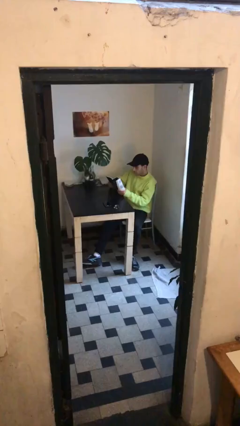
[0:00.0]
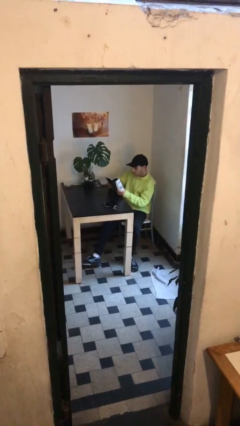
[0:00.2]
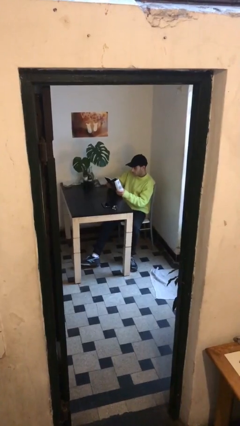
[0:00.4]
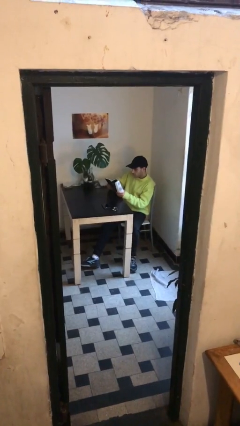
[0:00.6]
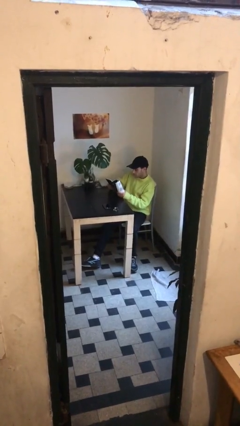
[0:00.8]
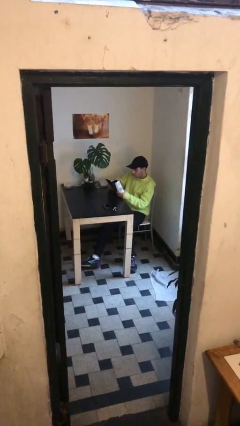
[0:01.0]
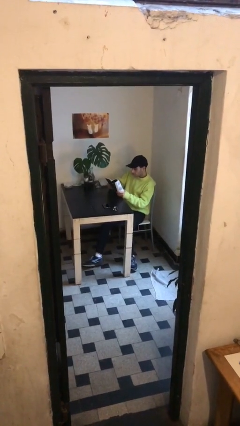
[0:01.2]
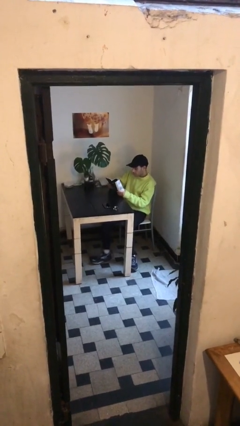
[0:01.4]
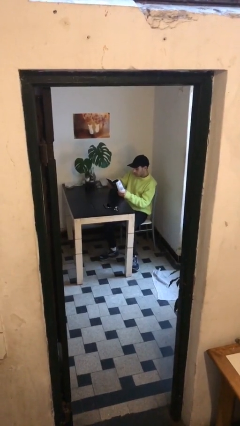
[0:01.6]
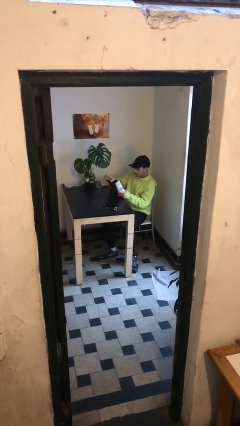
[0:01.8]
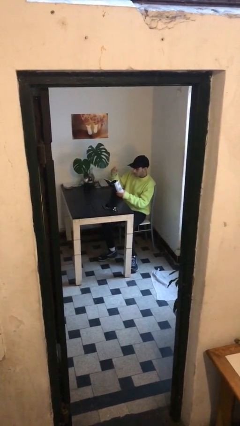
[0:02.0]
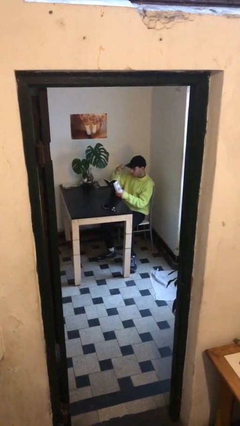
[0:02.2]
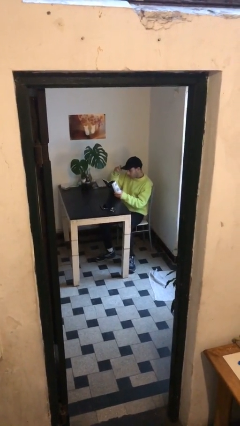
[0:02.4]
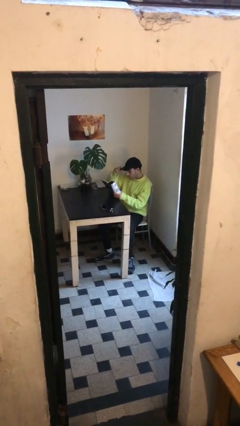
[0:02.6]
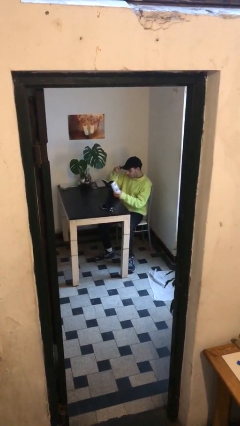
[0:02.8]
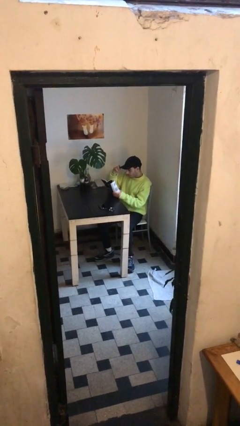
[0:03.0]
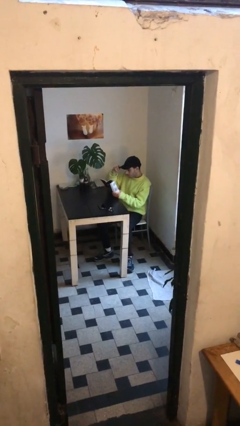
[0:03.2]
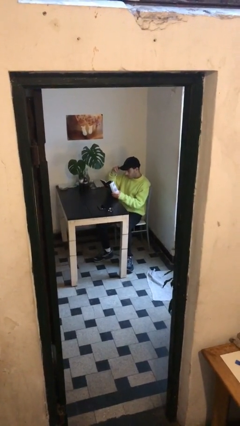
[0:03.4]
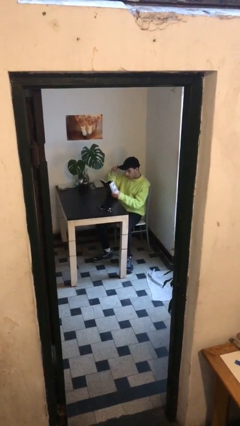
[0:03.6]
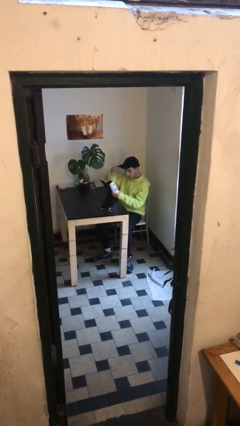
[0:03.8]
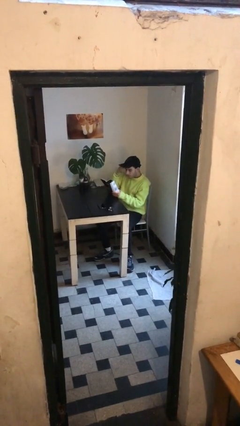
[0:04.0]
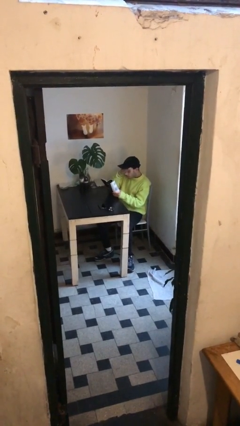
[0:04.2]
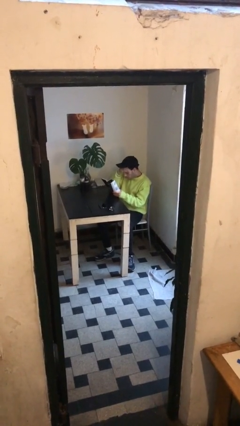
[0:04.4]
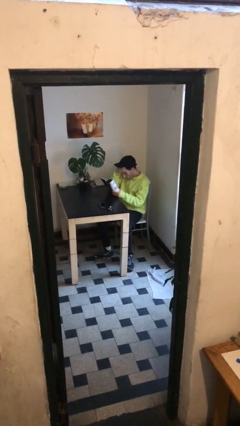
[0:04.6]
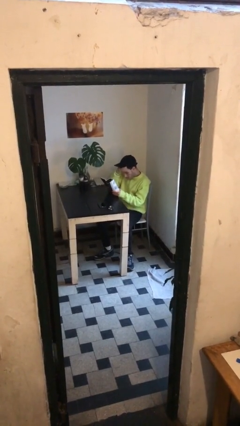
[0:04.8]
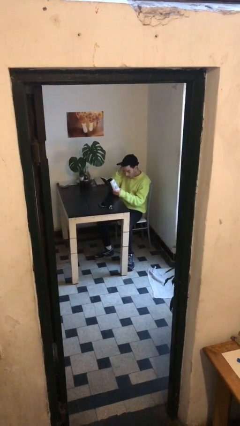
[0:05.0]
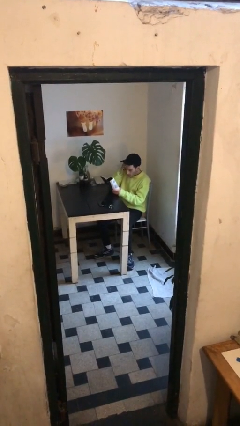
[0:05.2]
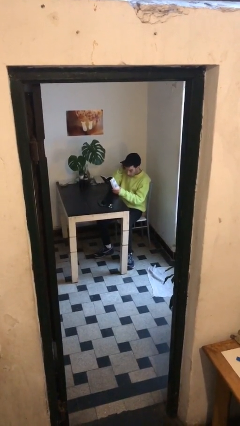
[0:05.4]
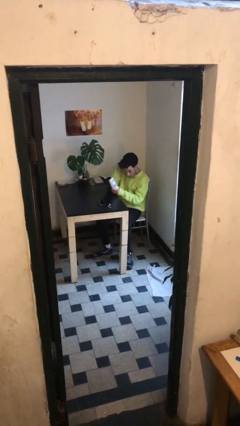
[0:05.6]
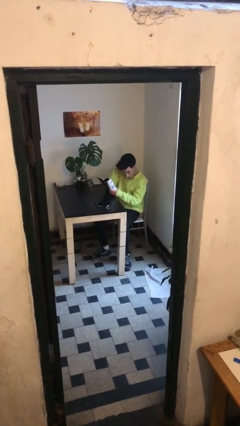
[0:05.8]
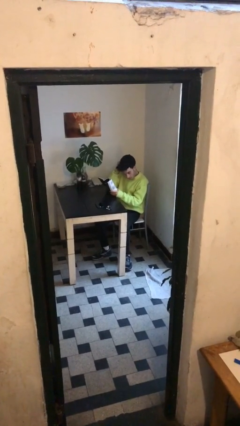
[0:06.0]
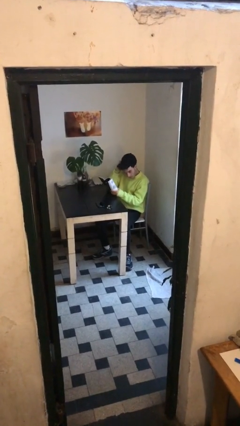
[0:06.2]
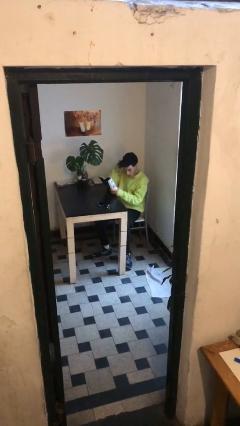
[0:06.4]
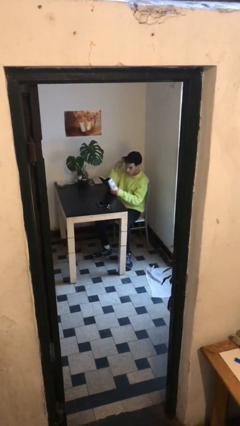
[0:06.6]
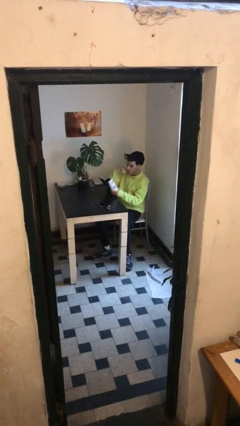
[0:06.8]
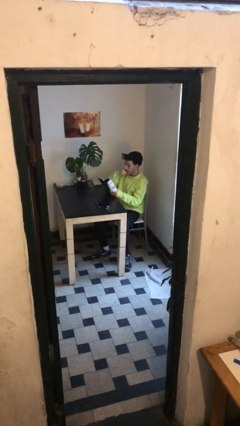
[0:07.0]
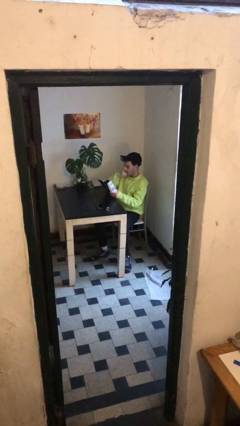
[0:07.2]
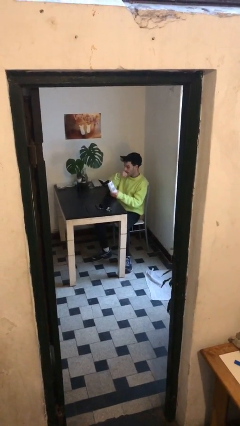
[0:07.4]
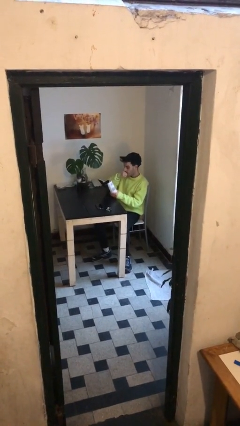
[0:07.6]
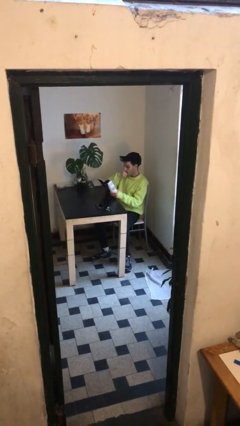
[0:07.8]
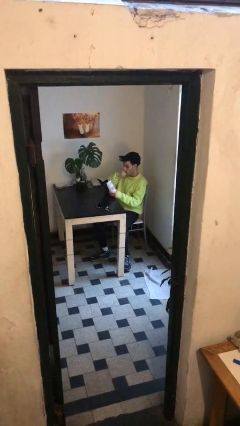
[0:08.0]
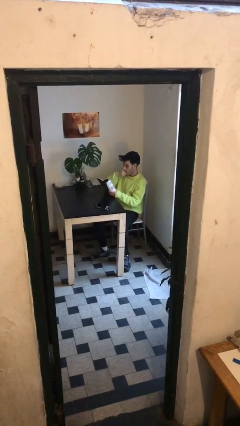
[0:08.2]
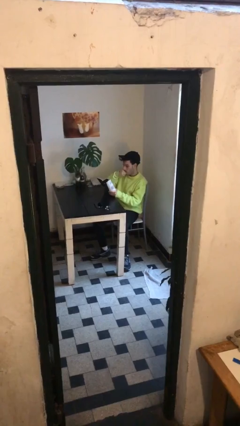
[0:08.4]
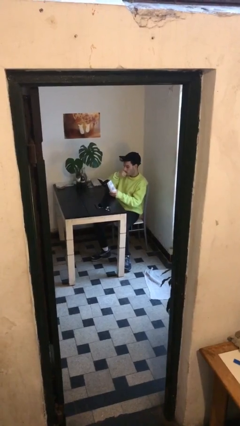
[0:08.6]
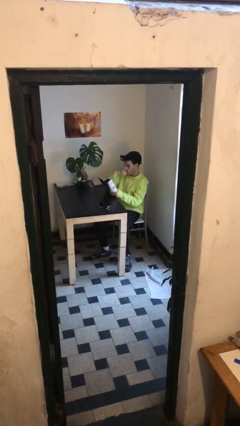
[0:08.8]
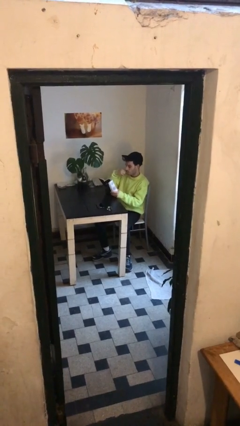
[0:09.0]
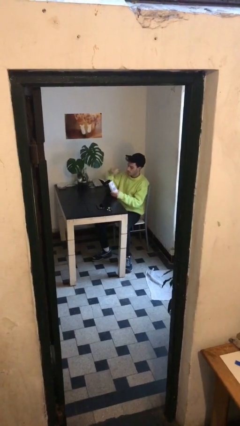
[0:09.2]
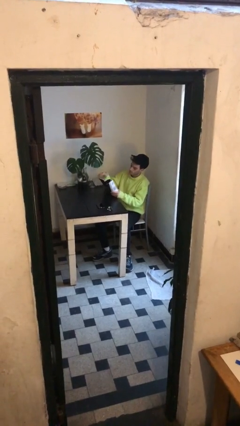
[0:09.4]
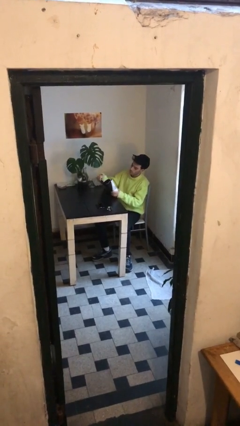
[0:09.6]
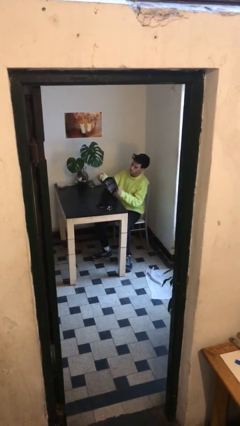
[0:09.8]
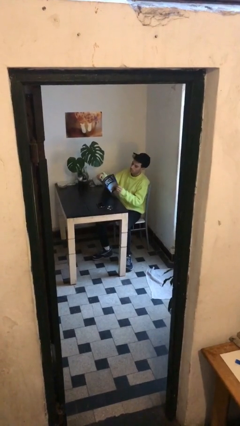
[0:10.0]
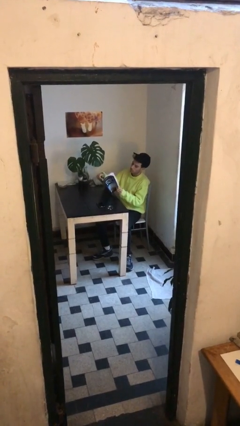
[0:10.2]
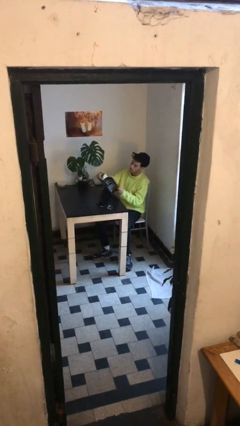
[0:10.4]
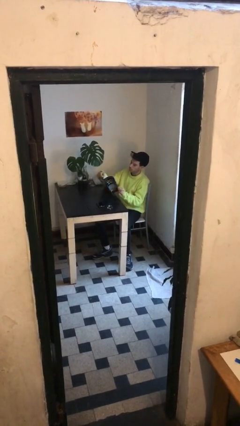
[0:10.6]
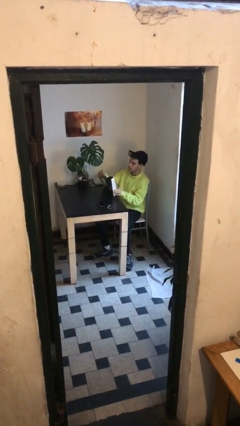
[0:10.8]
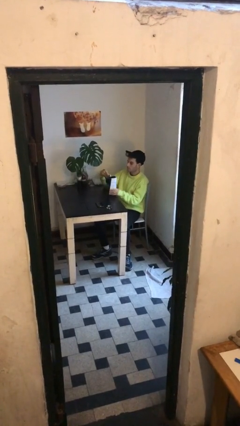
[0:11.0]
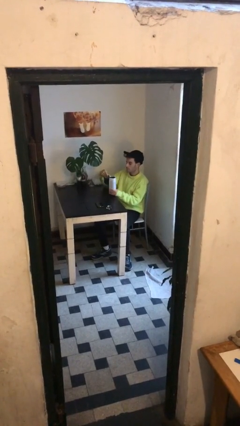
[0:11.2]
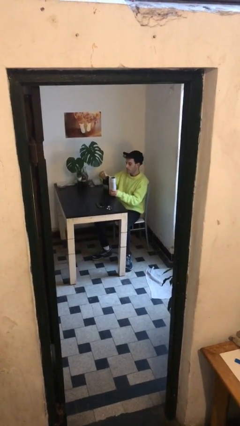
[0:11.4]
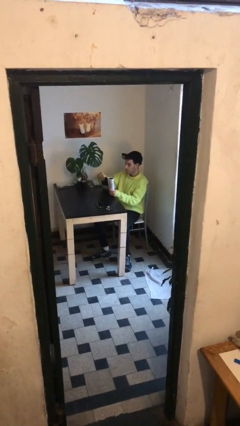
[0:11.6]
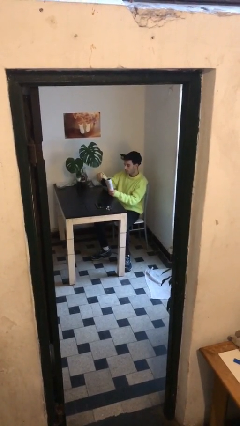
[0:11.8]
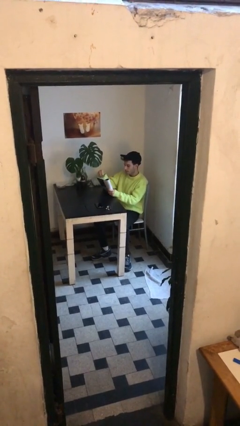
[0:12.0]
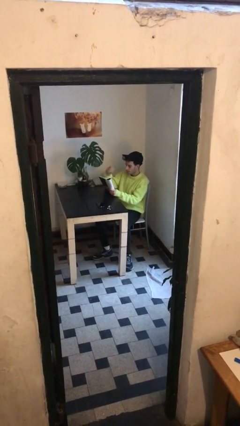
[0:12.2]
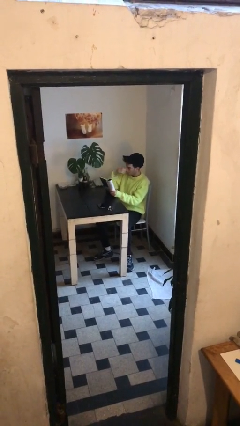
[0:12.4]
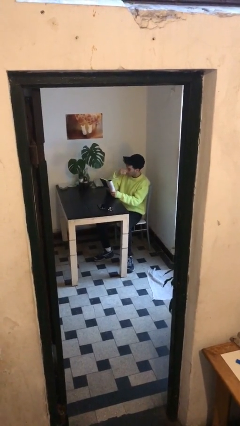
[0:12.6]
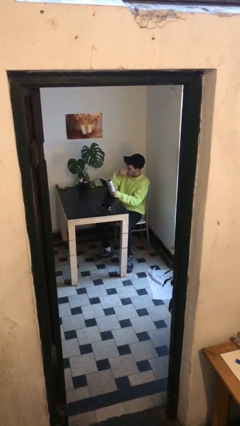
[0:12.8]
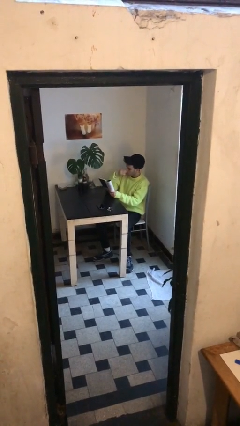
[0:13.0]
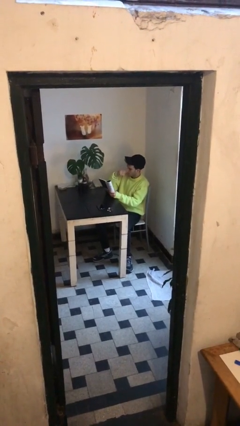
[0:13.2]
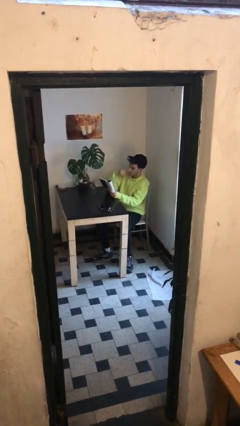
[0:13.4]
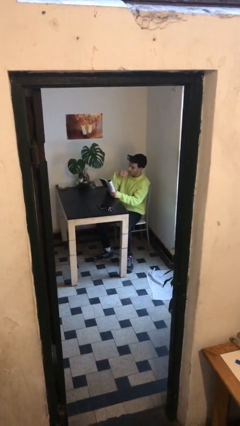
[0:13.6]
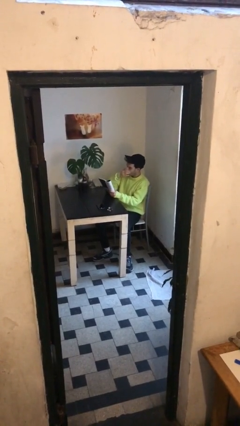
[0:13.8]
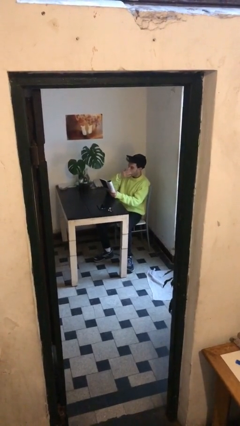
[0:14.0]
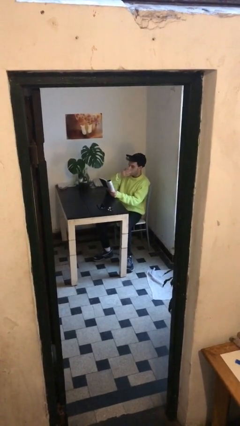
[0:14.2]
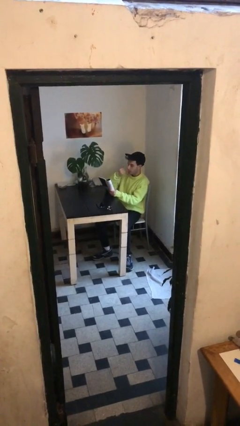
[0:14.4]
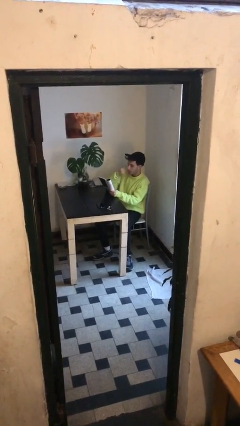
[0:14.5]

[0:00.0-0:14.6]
person reads document

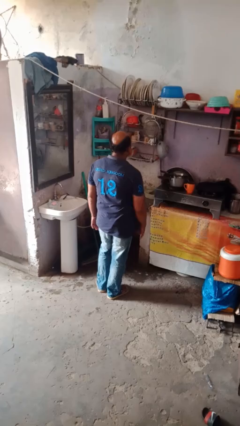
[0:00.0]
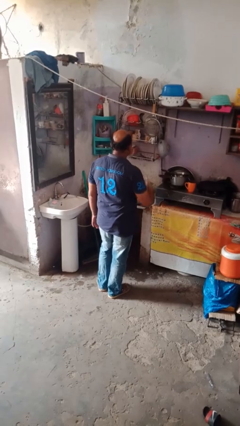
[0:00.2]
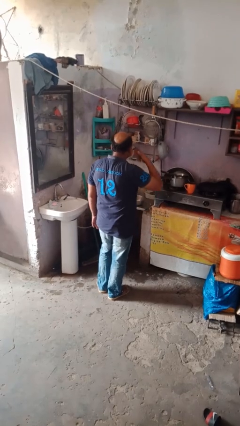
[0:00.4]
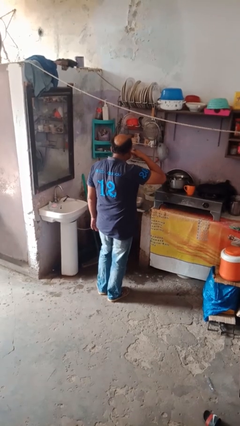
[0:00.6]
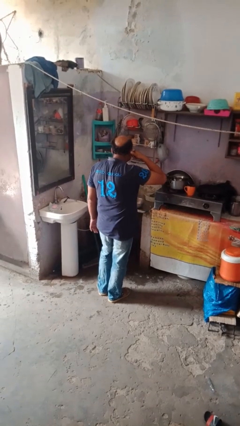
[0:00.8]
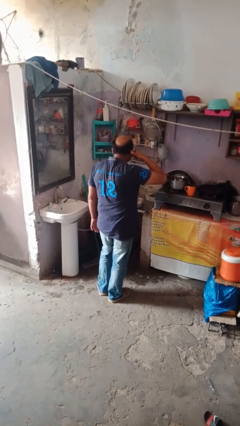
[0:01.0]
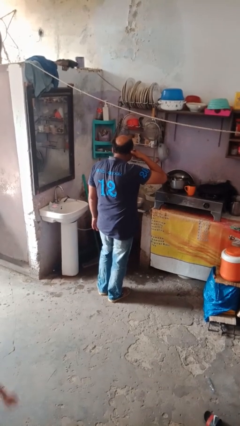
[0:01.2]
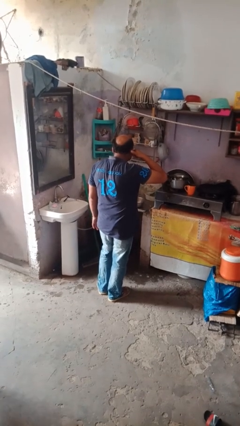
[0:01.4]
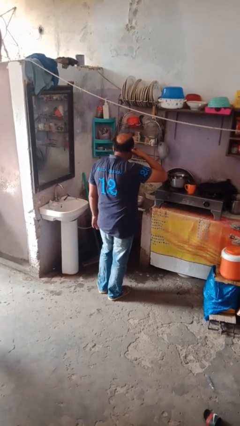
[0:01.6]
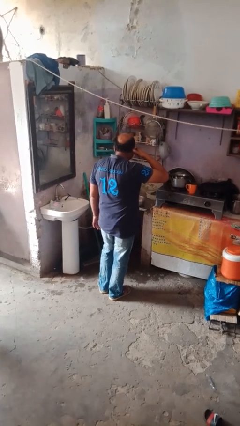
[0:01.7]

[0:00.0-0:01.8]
person gestures call me

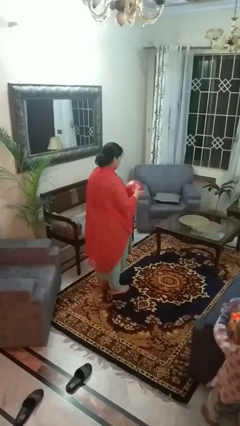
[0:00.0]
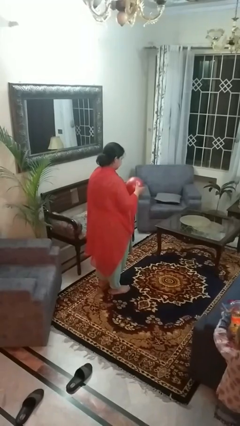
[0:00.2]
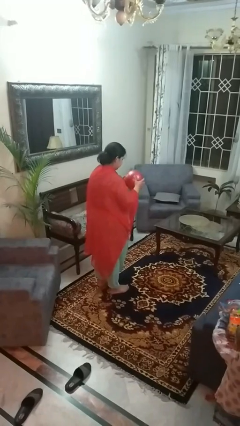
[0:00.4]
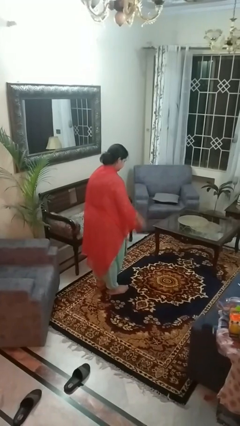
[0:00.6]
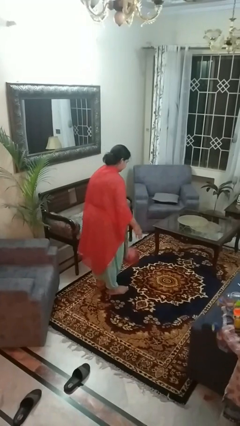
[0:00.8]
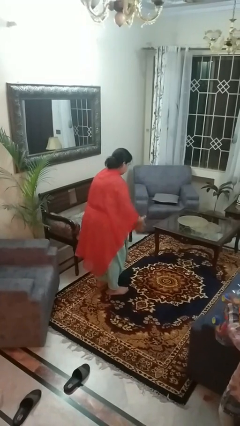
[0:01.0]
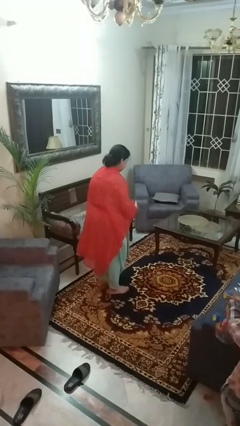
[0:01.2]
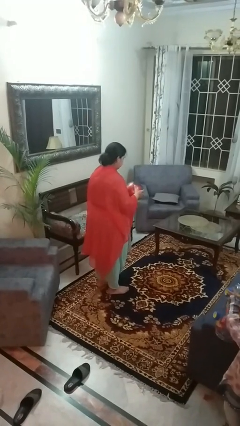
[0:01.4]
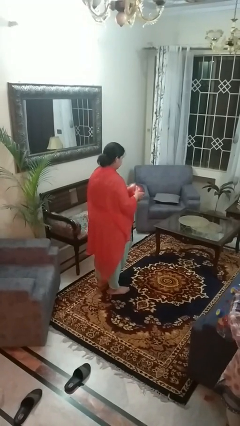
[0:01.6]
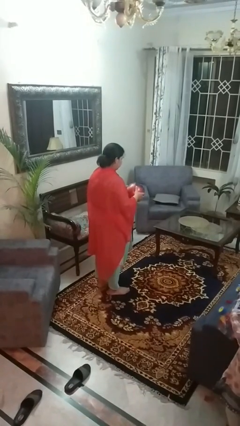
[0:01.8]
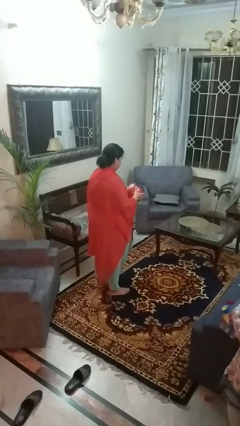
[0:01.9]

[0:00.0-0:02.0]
person bounces ball on floor

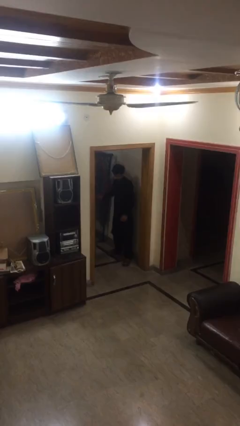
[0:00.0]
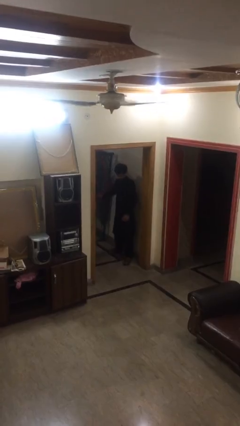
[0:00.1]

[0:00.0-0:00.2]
person enters scene through structure
